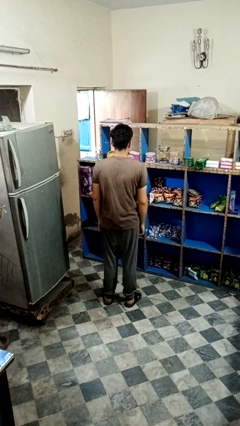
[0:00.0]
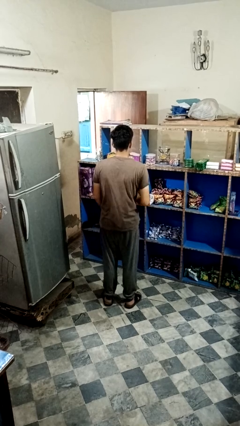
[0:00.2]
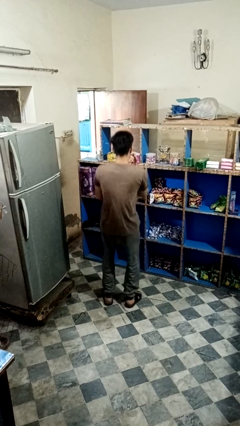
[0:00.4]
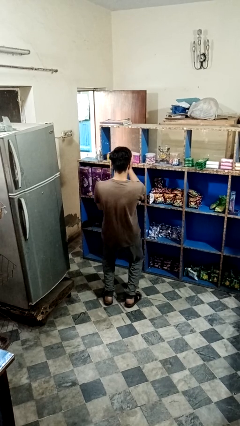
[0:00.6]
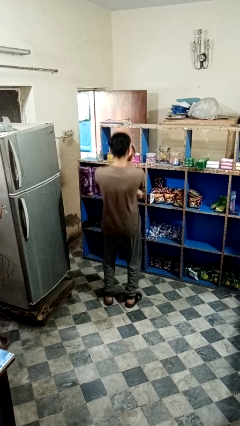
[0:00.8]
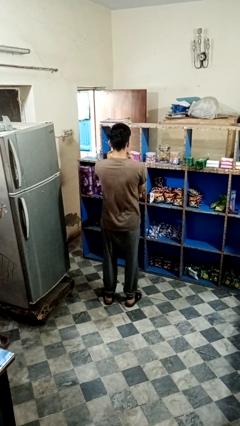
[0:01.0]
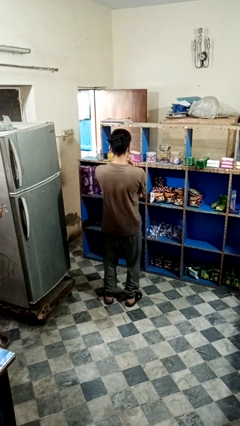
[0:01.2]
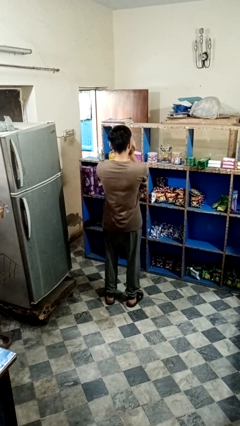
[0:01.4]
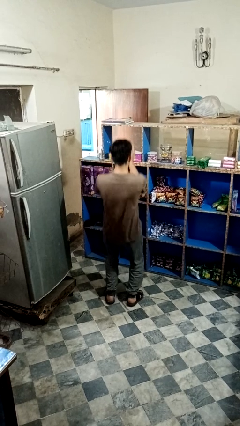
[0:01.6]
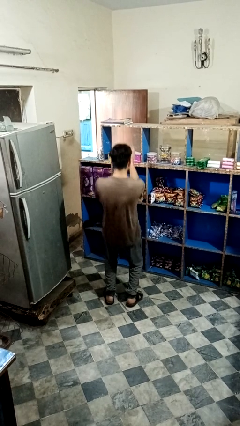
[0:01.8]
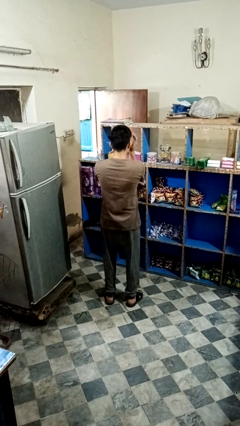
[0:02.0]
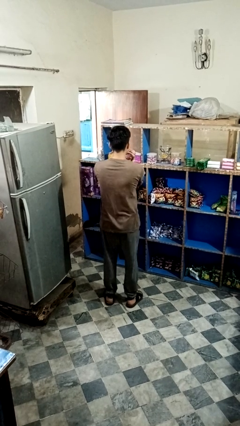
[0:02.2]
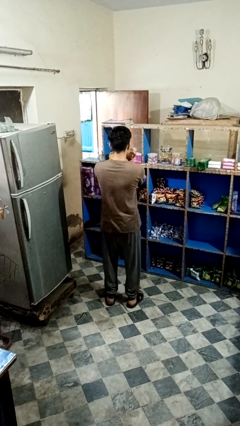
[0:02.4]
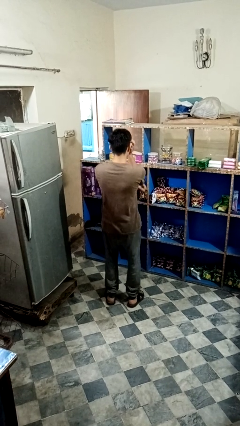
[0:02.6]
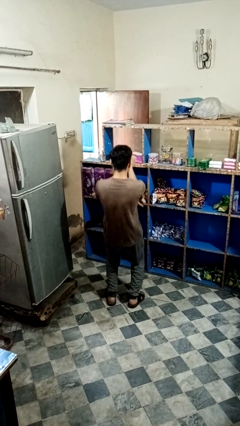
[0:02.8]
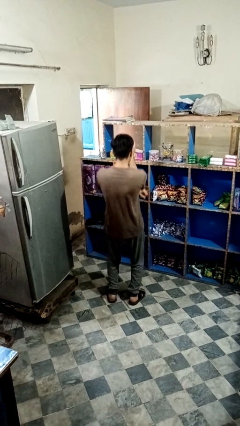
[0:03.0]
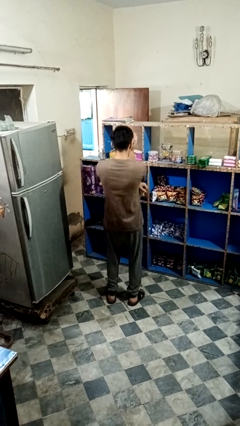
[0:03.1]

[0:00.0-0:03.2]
person dances in place

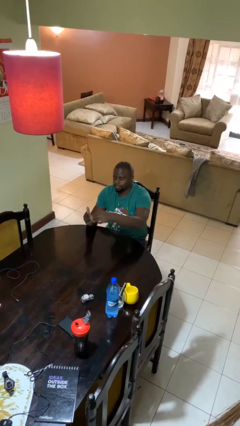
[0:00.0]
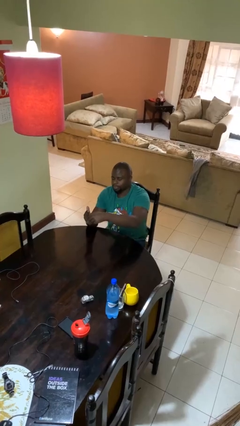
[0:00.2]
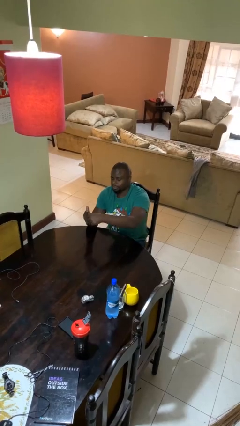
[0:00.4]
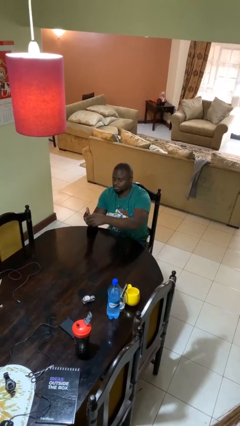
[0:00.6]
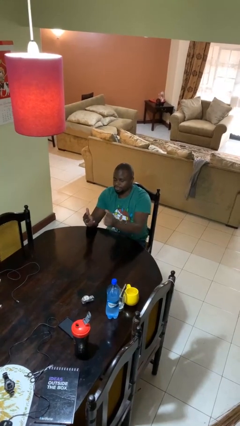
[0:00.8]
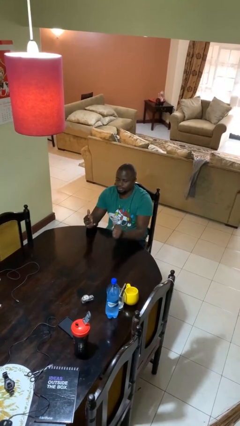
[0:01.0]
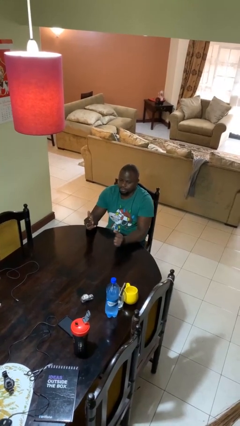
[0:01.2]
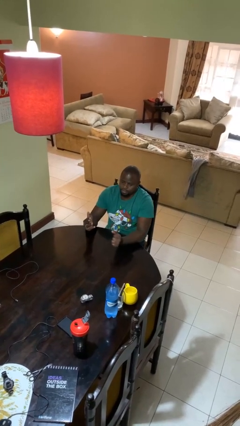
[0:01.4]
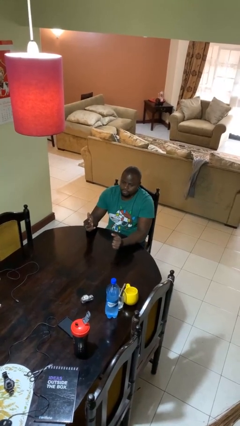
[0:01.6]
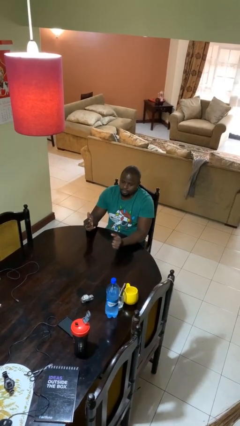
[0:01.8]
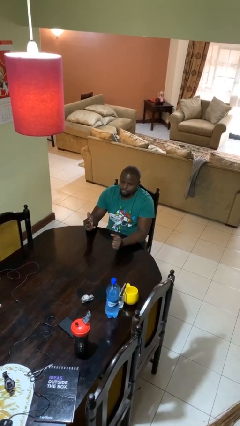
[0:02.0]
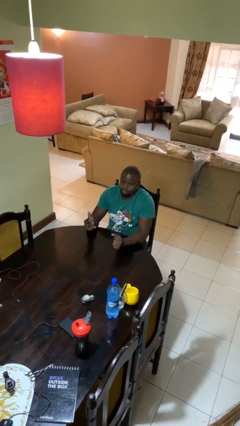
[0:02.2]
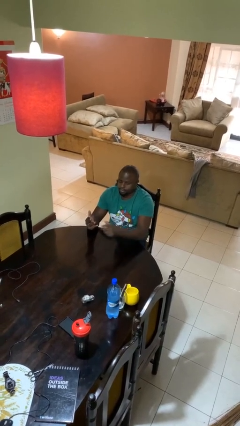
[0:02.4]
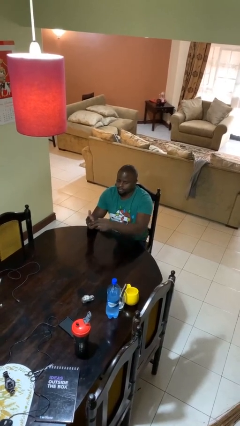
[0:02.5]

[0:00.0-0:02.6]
person puts on ring

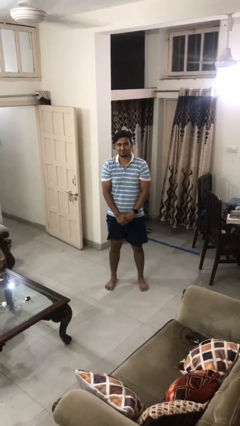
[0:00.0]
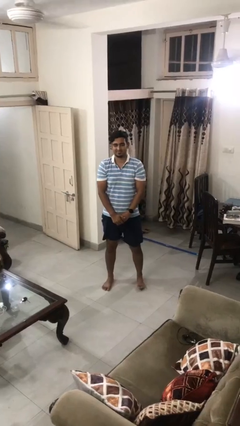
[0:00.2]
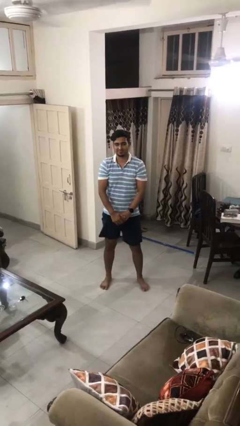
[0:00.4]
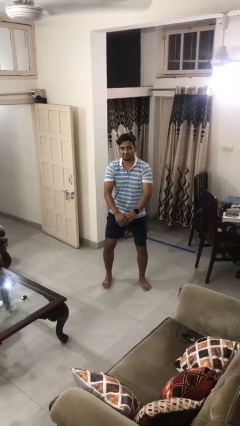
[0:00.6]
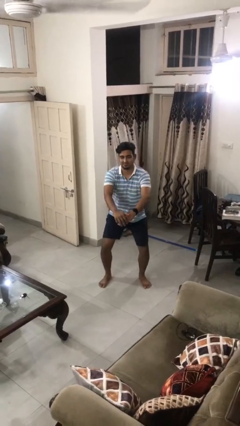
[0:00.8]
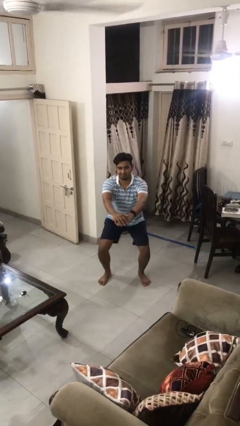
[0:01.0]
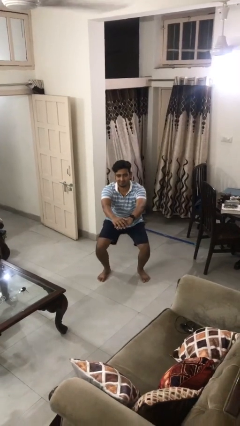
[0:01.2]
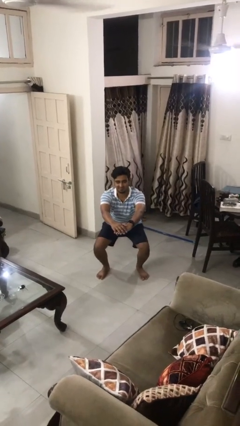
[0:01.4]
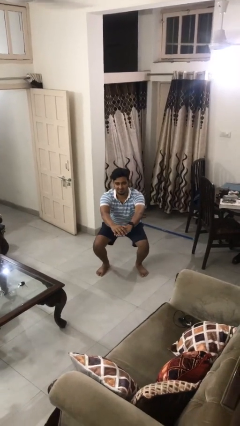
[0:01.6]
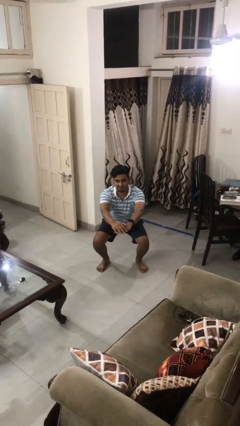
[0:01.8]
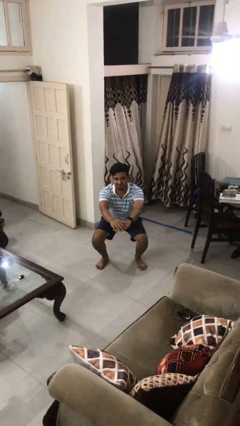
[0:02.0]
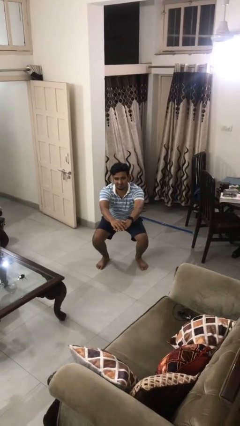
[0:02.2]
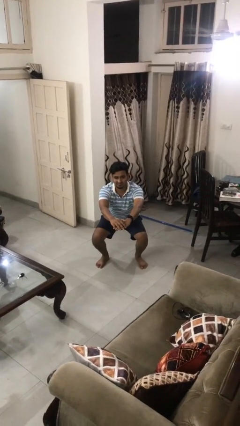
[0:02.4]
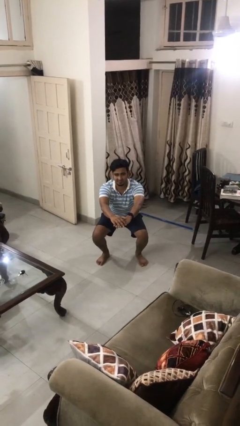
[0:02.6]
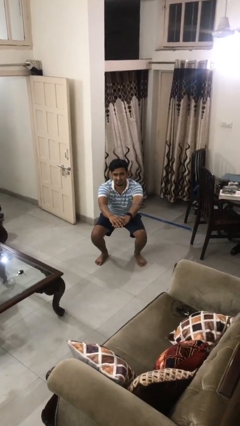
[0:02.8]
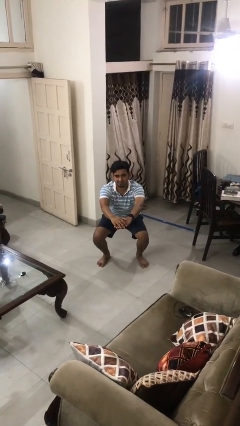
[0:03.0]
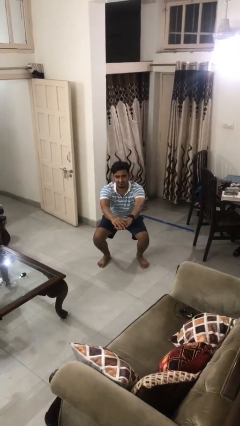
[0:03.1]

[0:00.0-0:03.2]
person squats

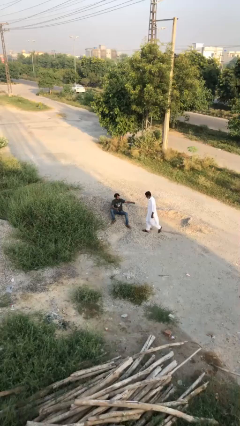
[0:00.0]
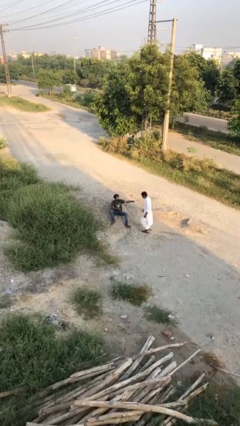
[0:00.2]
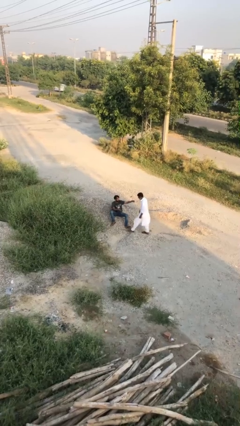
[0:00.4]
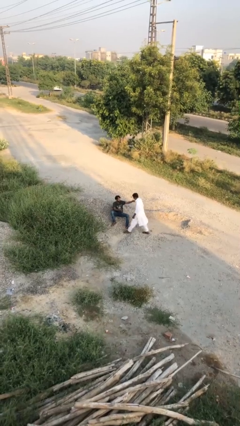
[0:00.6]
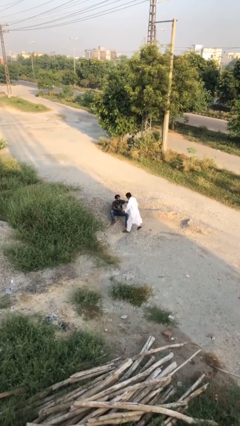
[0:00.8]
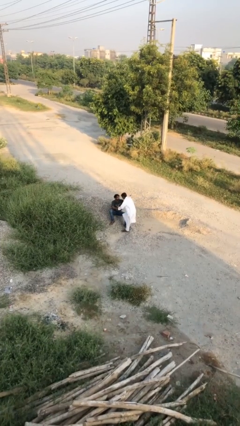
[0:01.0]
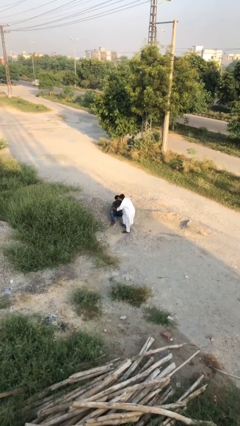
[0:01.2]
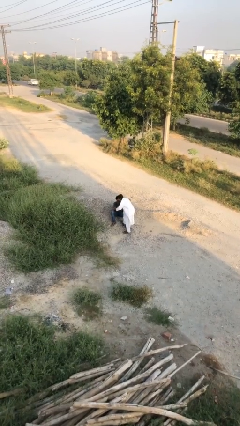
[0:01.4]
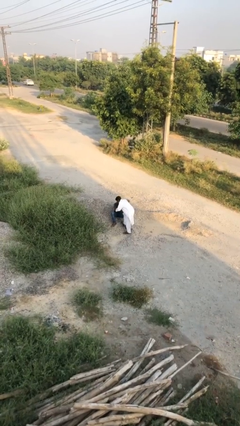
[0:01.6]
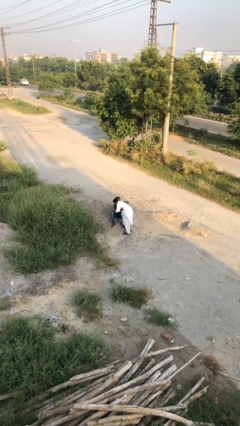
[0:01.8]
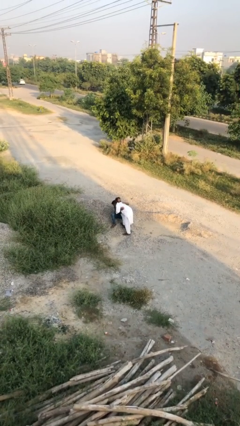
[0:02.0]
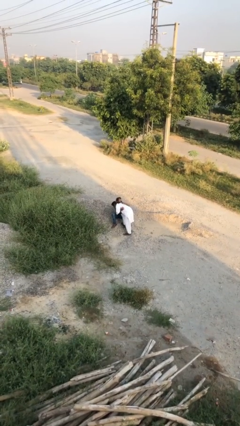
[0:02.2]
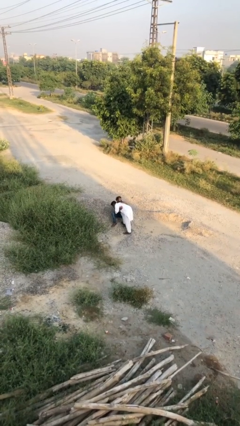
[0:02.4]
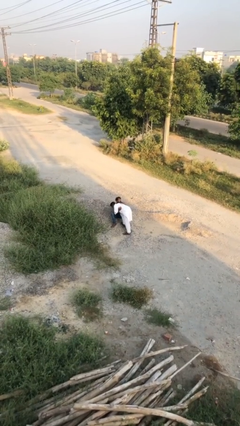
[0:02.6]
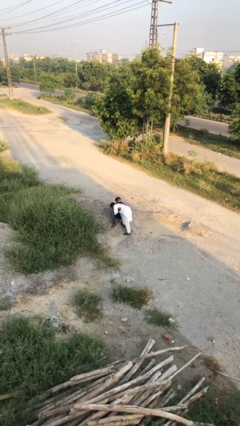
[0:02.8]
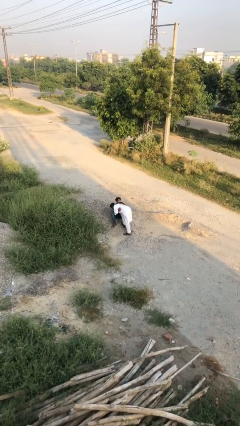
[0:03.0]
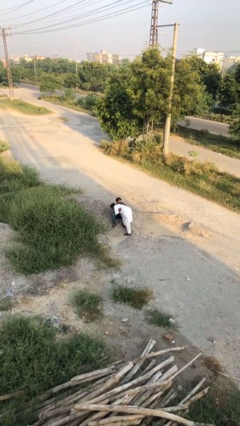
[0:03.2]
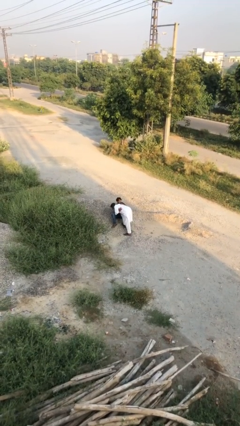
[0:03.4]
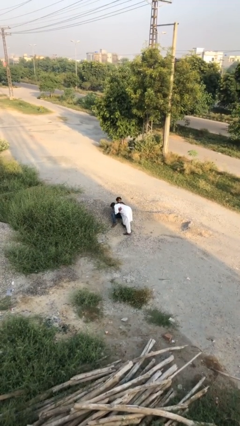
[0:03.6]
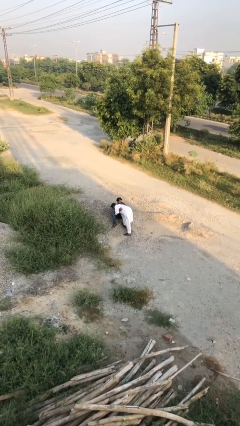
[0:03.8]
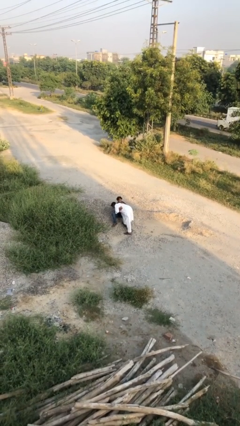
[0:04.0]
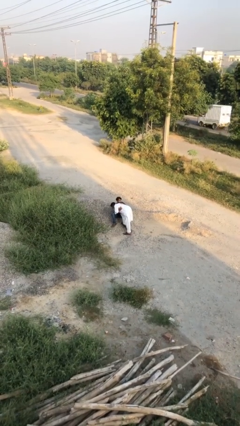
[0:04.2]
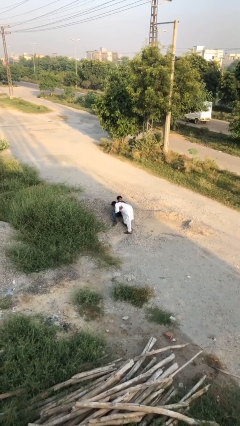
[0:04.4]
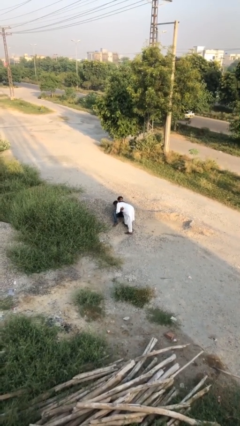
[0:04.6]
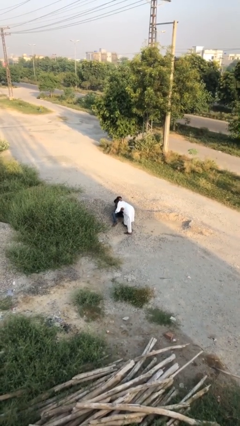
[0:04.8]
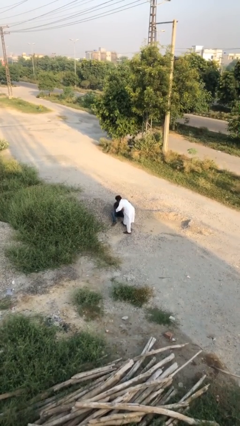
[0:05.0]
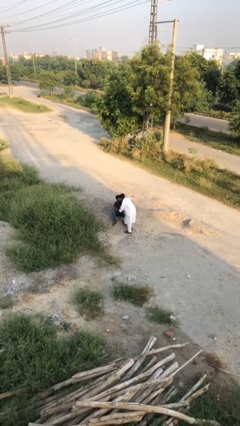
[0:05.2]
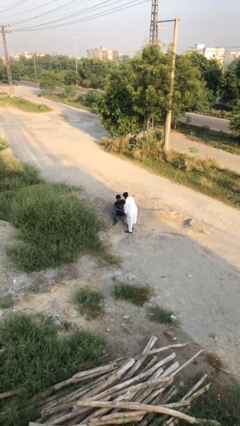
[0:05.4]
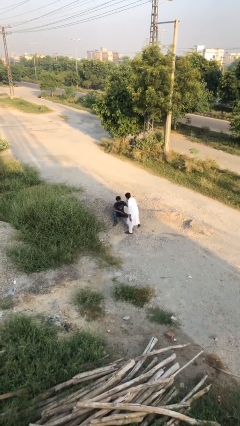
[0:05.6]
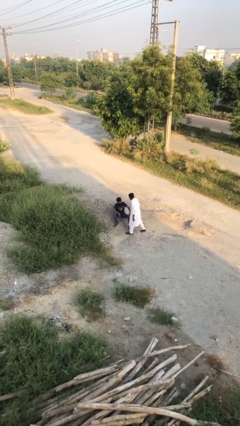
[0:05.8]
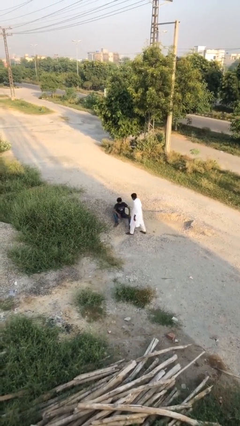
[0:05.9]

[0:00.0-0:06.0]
person embraces person

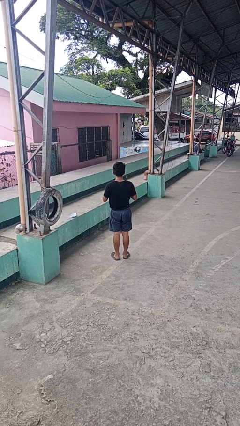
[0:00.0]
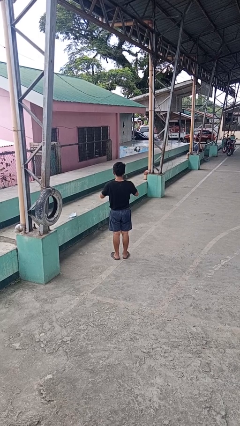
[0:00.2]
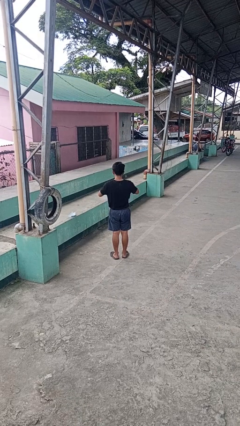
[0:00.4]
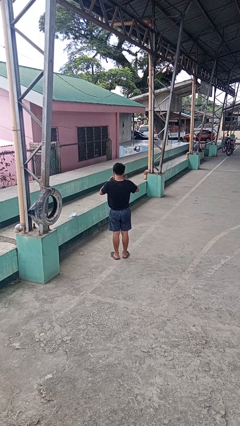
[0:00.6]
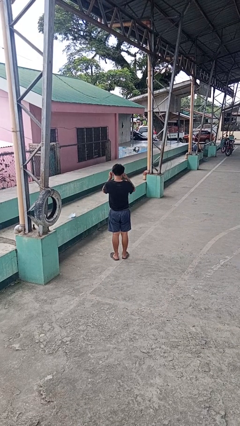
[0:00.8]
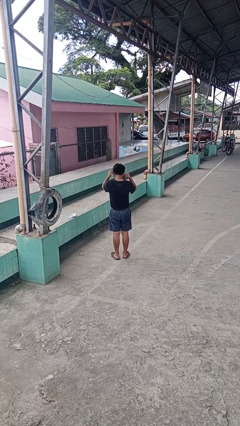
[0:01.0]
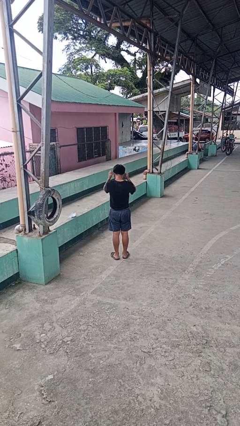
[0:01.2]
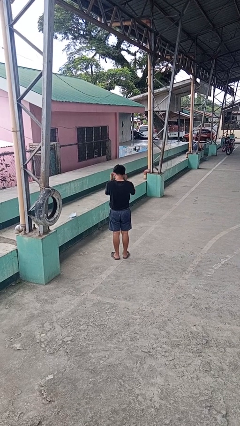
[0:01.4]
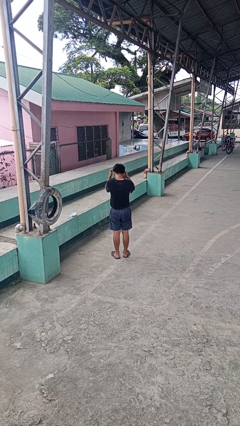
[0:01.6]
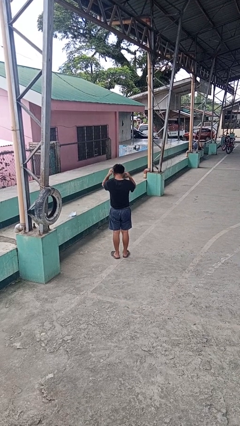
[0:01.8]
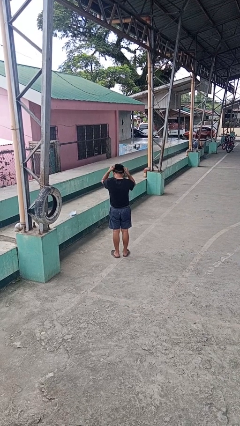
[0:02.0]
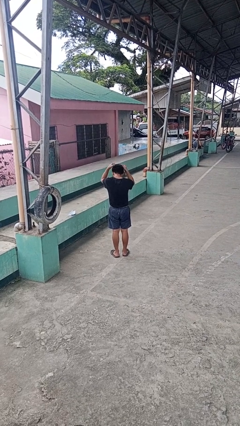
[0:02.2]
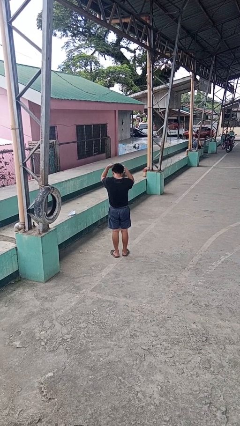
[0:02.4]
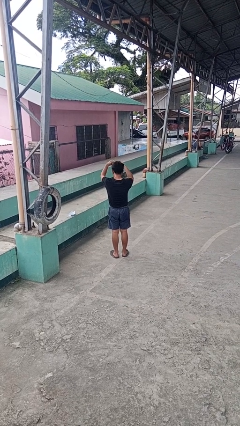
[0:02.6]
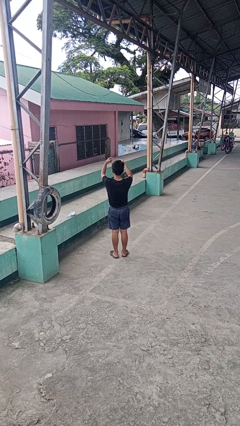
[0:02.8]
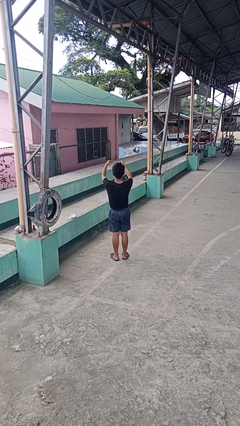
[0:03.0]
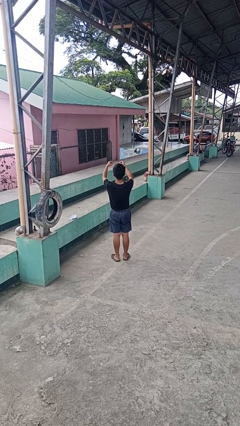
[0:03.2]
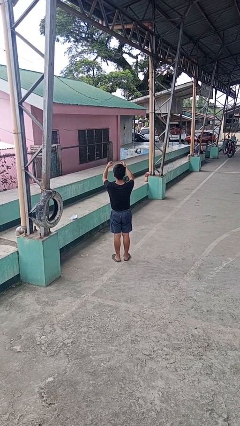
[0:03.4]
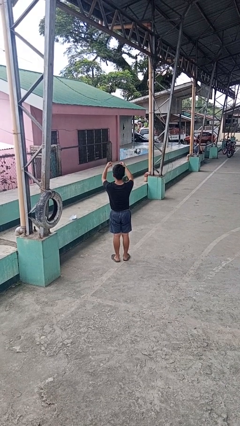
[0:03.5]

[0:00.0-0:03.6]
person takes off necklace
